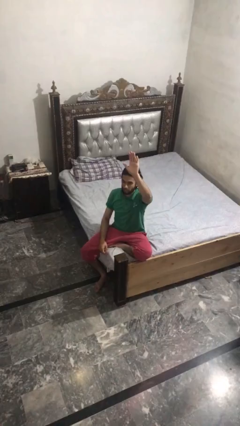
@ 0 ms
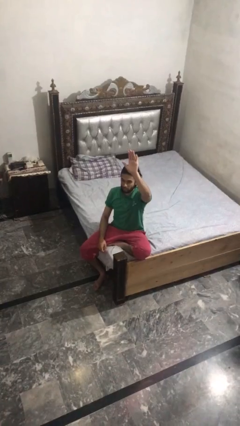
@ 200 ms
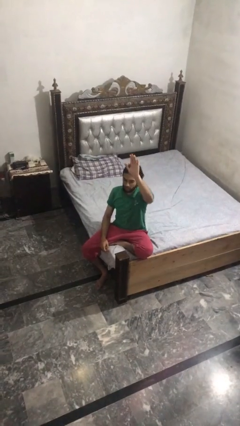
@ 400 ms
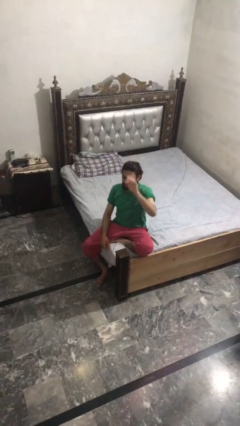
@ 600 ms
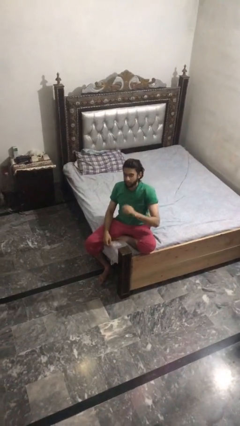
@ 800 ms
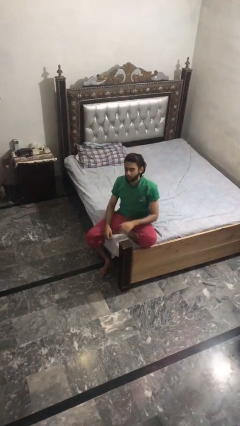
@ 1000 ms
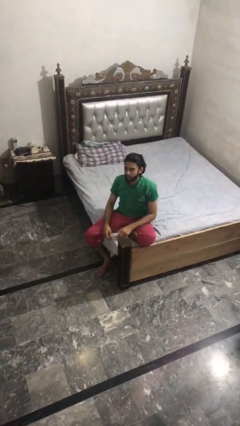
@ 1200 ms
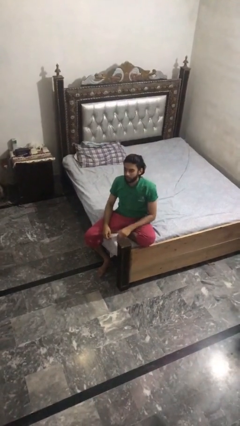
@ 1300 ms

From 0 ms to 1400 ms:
person gestures lower hand

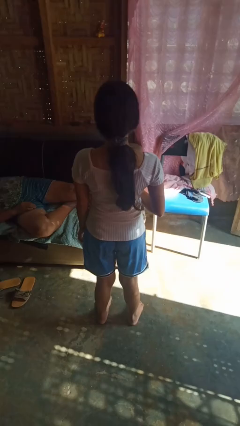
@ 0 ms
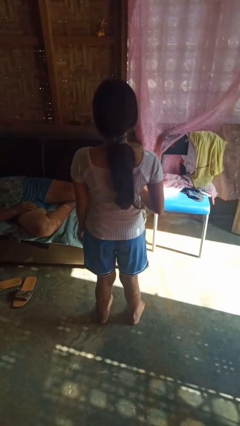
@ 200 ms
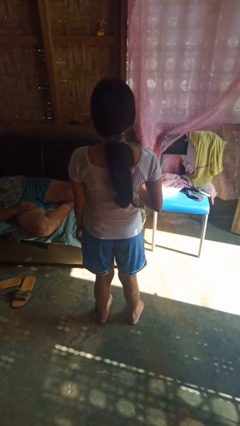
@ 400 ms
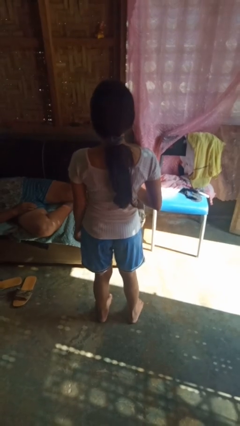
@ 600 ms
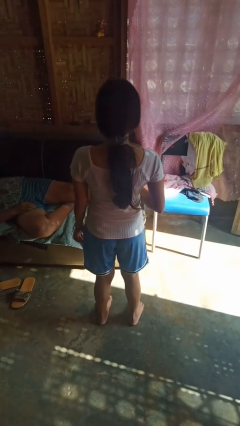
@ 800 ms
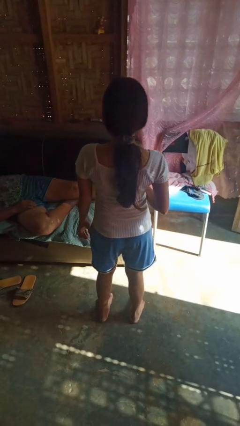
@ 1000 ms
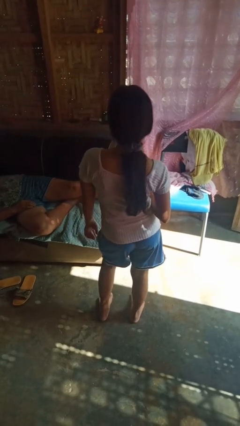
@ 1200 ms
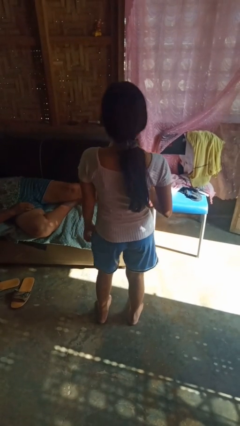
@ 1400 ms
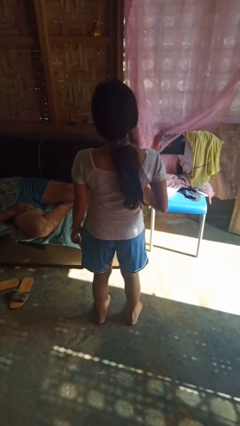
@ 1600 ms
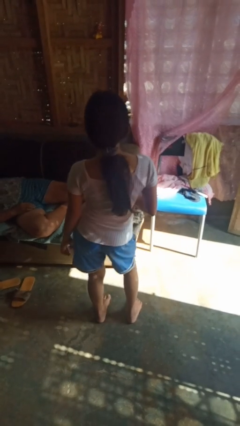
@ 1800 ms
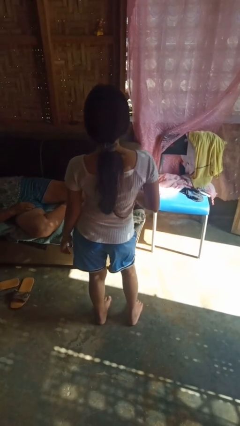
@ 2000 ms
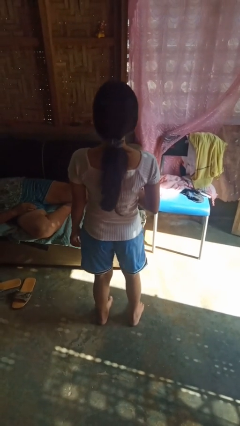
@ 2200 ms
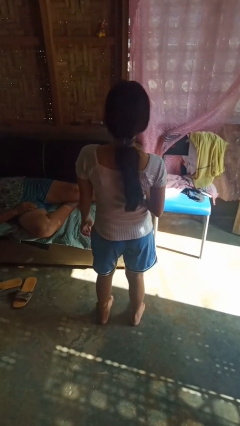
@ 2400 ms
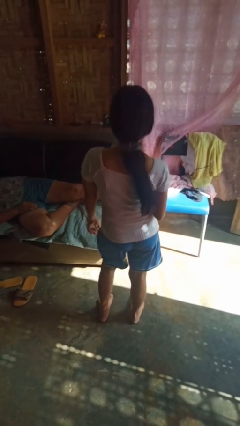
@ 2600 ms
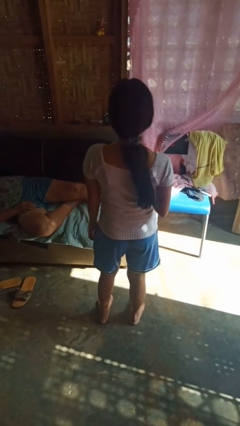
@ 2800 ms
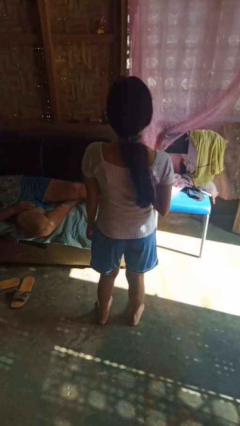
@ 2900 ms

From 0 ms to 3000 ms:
person wiggles hips

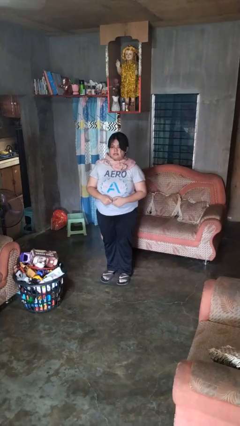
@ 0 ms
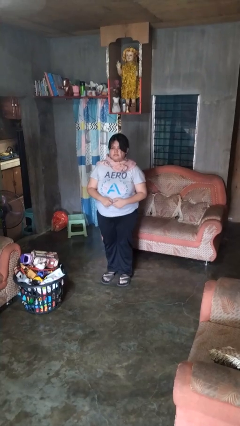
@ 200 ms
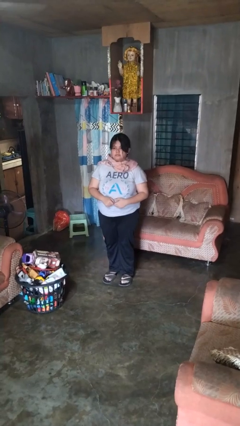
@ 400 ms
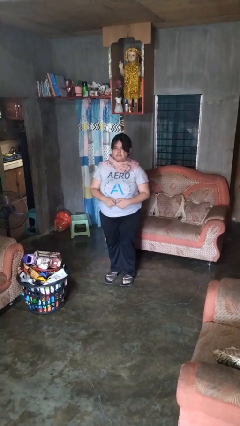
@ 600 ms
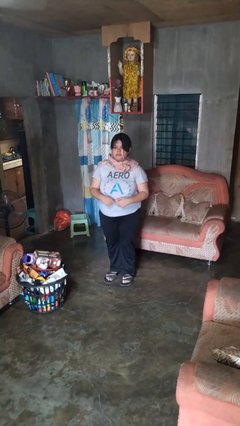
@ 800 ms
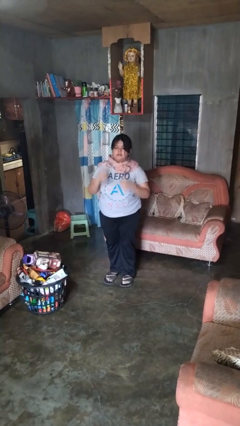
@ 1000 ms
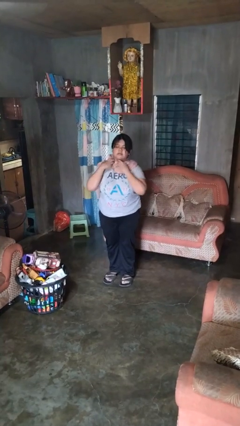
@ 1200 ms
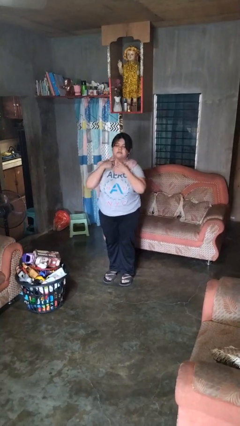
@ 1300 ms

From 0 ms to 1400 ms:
person takes off scarf

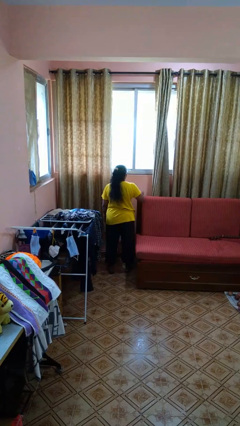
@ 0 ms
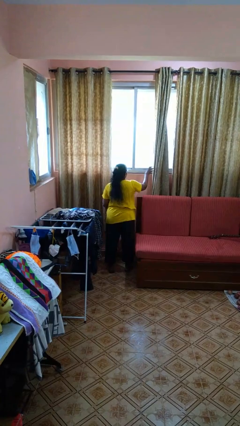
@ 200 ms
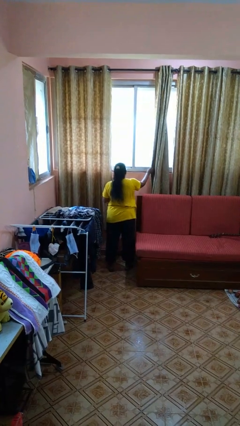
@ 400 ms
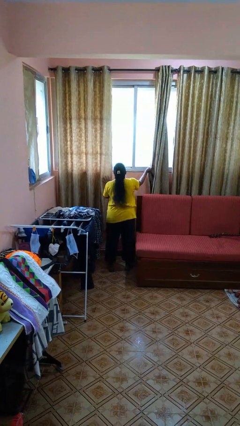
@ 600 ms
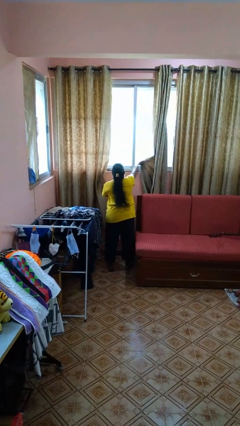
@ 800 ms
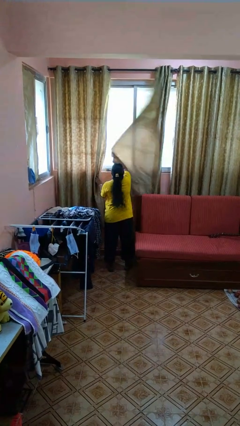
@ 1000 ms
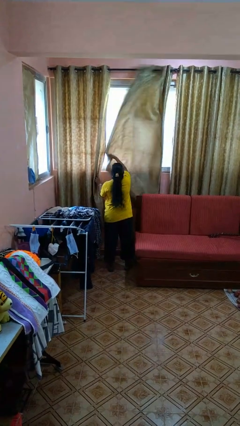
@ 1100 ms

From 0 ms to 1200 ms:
person closes curtains

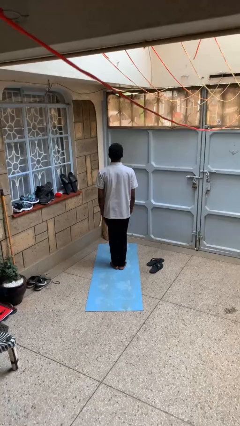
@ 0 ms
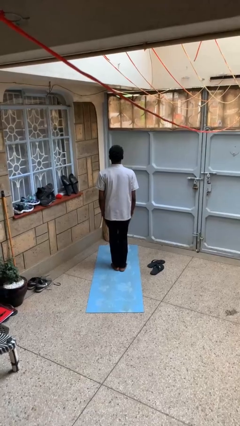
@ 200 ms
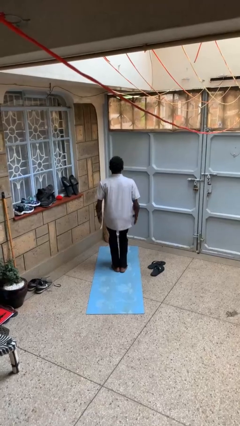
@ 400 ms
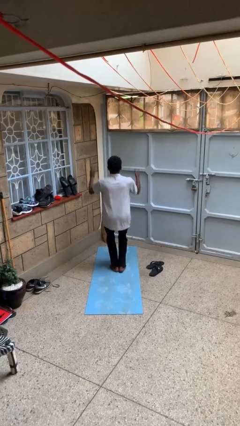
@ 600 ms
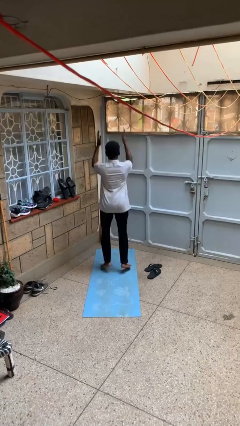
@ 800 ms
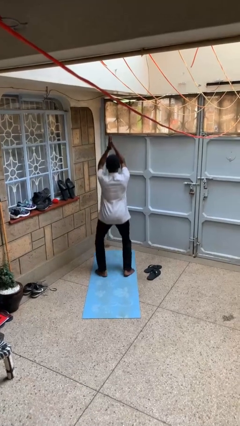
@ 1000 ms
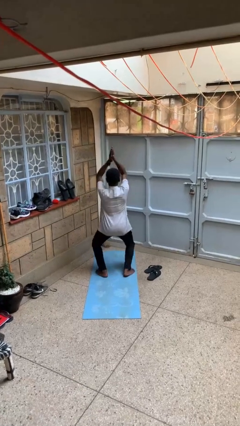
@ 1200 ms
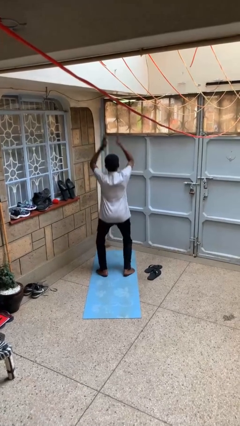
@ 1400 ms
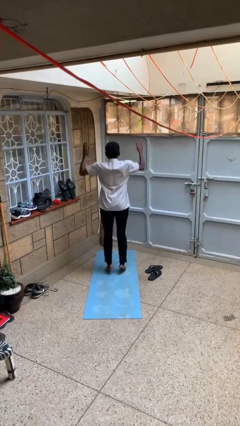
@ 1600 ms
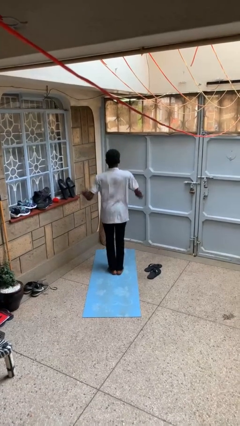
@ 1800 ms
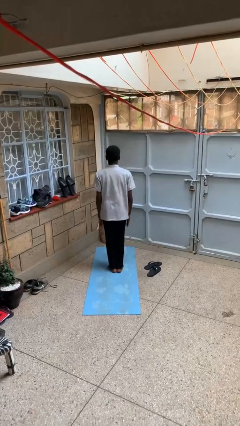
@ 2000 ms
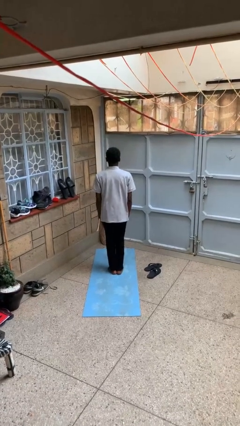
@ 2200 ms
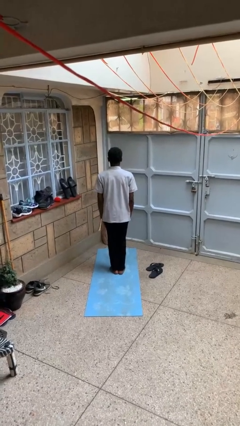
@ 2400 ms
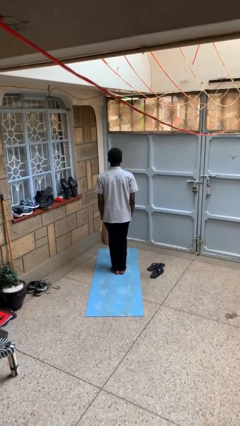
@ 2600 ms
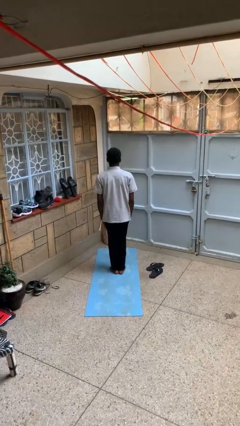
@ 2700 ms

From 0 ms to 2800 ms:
person exercises with jumping jacks

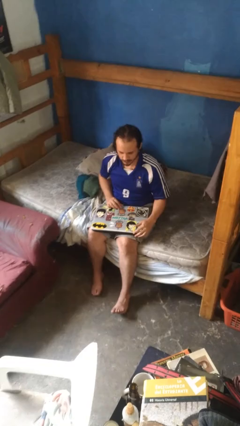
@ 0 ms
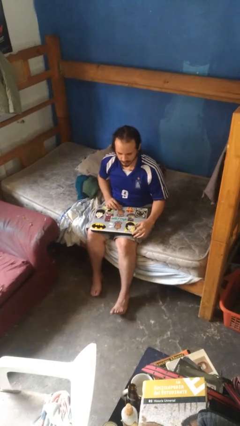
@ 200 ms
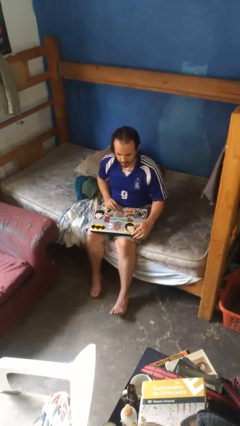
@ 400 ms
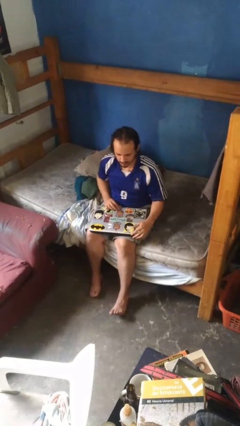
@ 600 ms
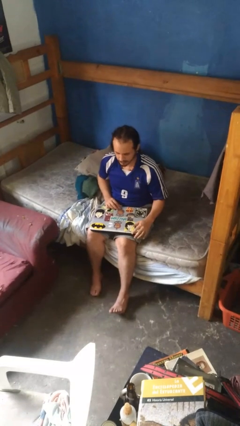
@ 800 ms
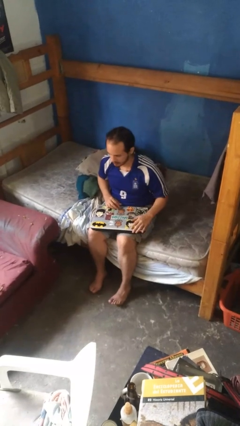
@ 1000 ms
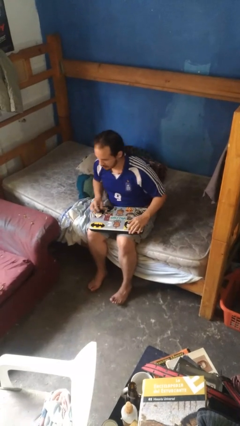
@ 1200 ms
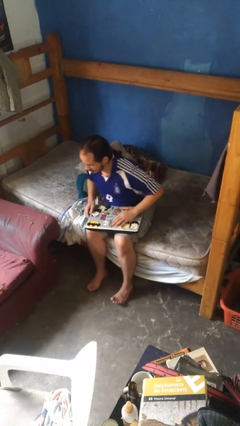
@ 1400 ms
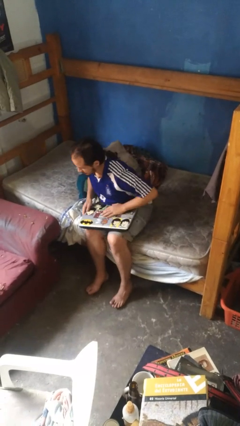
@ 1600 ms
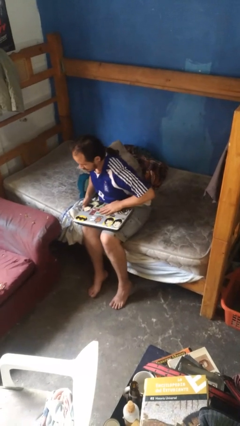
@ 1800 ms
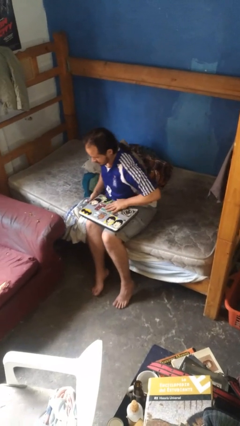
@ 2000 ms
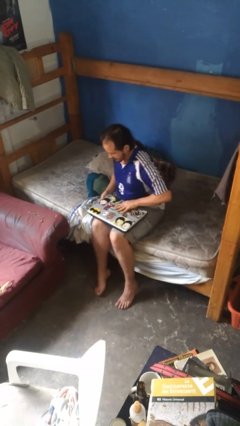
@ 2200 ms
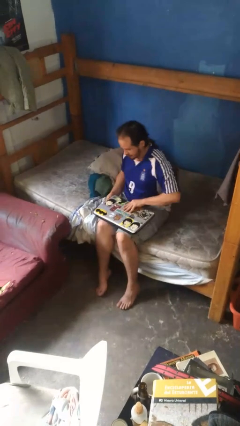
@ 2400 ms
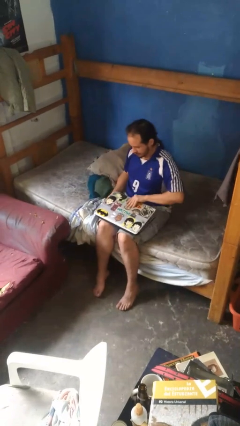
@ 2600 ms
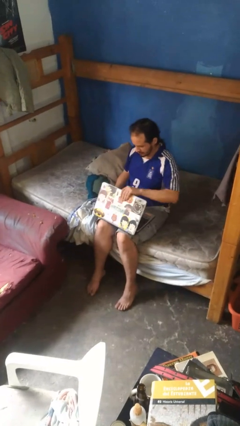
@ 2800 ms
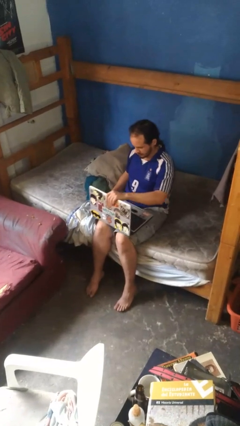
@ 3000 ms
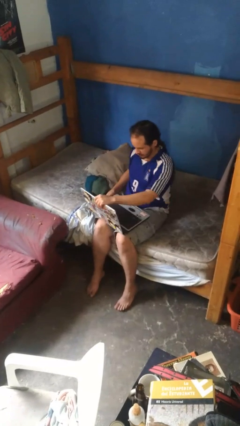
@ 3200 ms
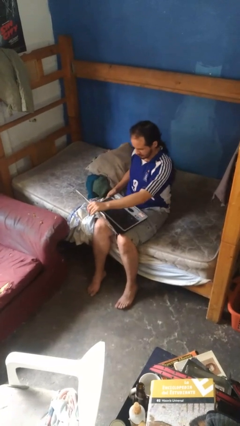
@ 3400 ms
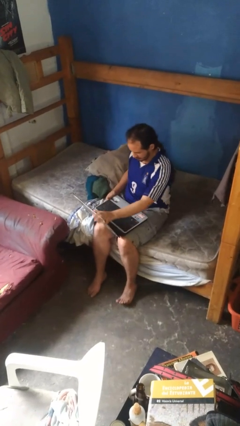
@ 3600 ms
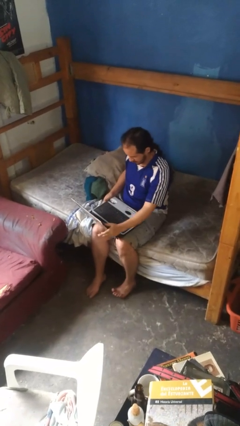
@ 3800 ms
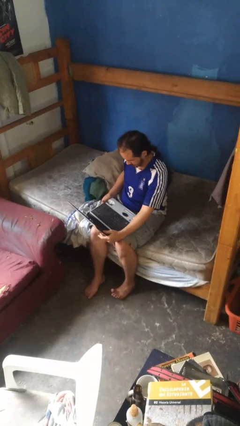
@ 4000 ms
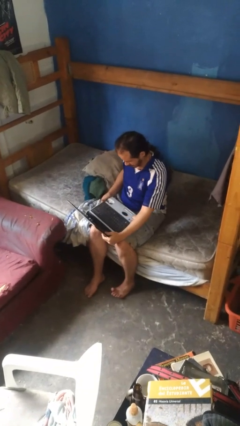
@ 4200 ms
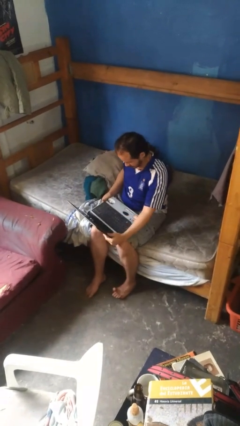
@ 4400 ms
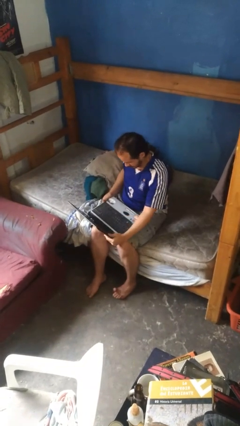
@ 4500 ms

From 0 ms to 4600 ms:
person opens laptop

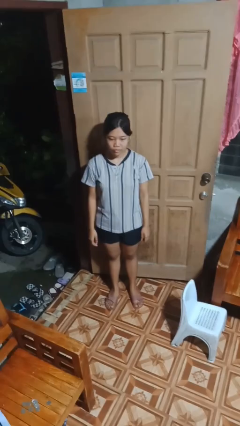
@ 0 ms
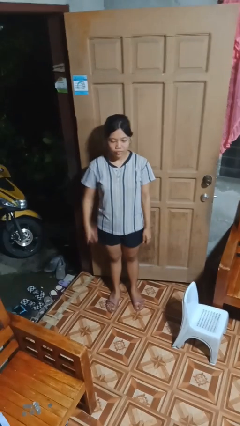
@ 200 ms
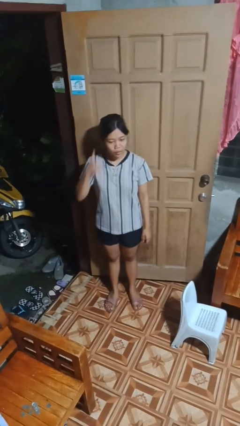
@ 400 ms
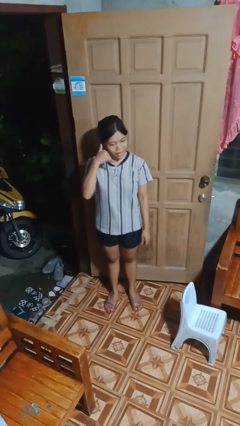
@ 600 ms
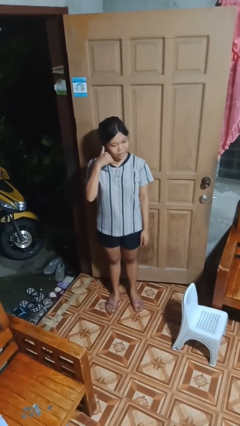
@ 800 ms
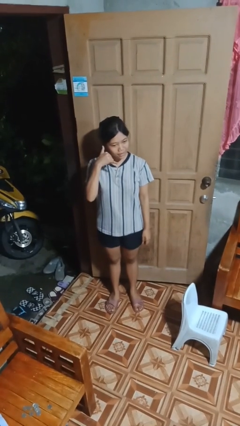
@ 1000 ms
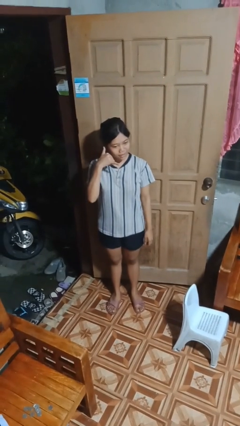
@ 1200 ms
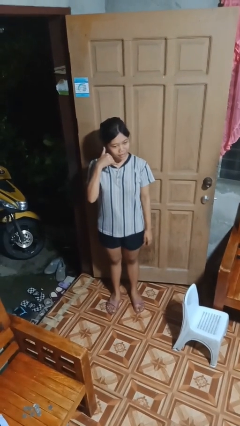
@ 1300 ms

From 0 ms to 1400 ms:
person gestures call me

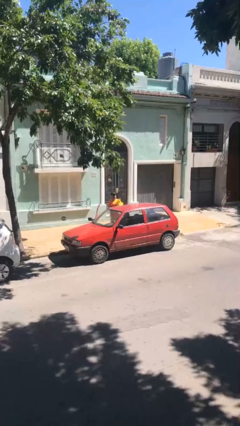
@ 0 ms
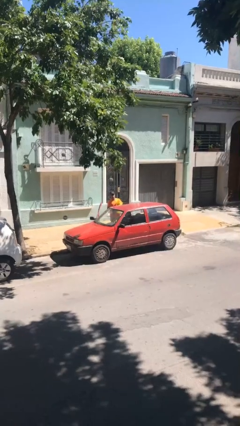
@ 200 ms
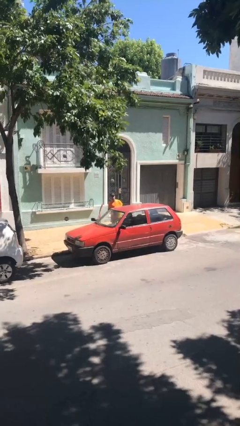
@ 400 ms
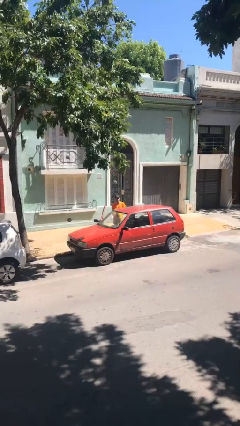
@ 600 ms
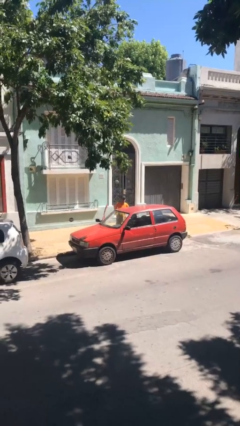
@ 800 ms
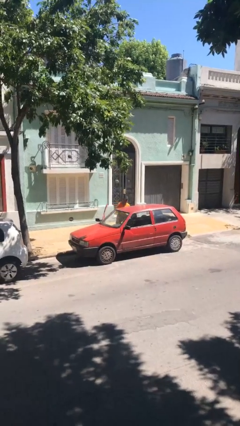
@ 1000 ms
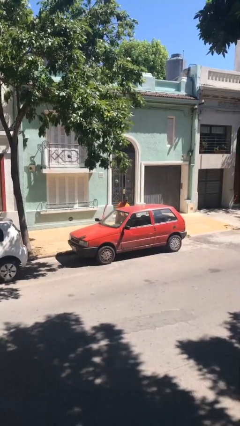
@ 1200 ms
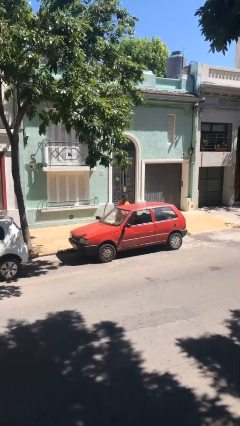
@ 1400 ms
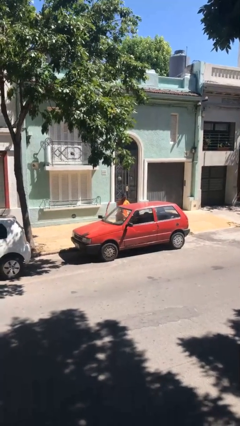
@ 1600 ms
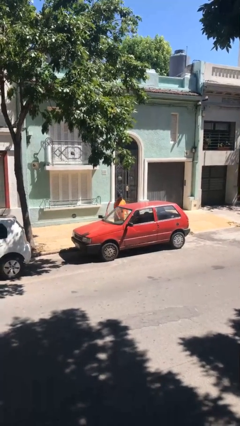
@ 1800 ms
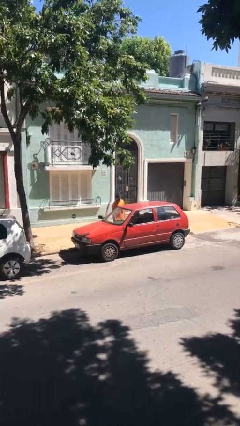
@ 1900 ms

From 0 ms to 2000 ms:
person loads car
